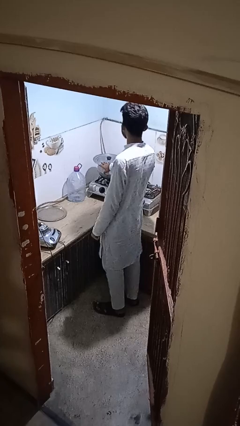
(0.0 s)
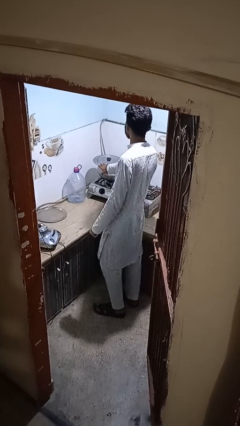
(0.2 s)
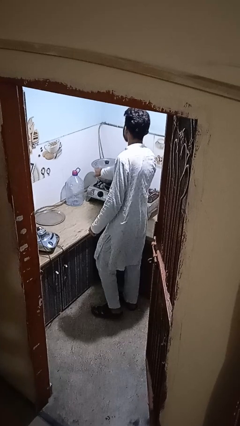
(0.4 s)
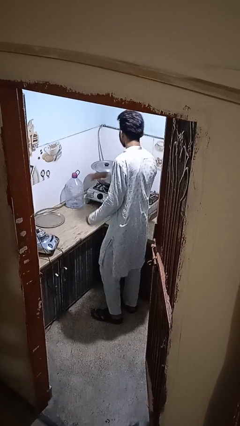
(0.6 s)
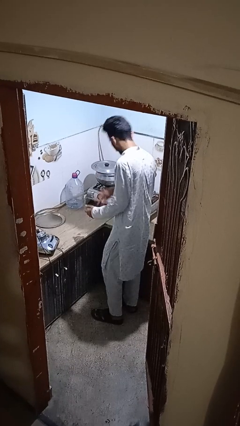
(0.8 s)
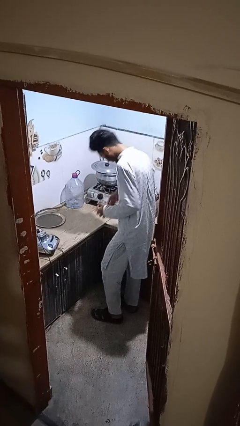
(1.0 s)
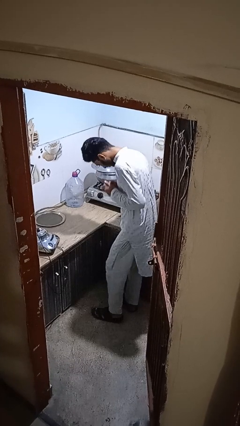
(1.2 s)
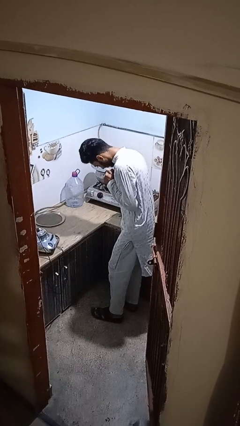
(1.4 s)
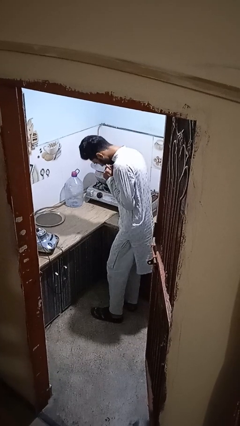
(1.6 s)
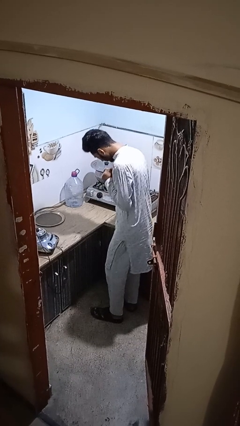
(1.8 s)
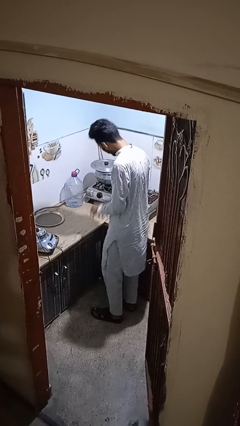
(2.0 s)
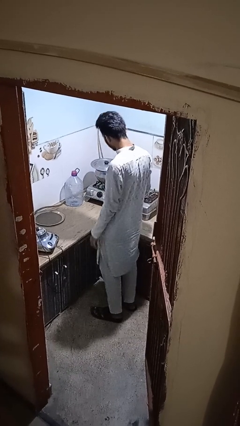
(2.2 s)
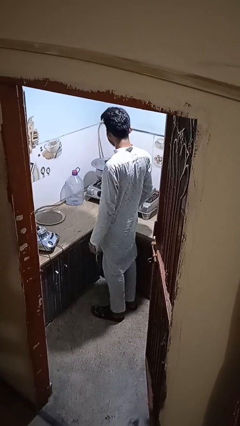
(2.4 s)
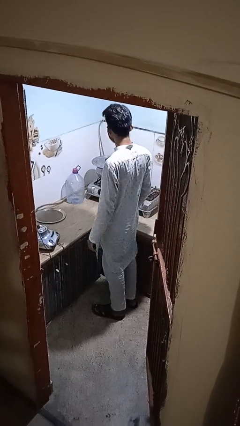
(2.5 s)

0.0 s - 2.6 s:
person burns hand

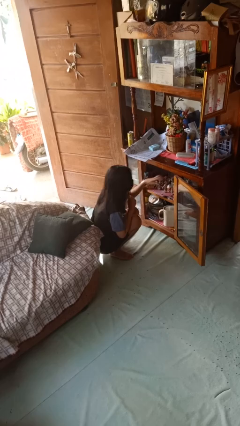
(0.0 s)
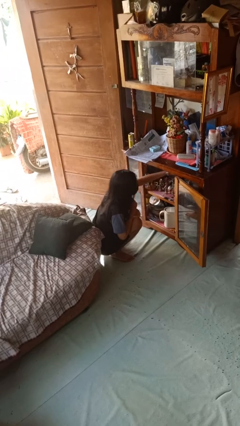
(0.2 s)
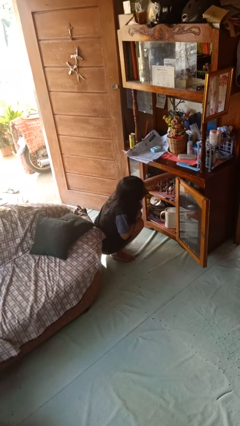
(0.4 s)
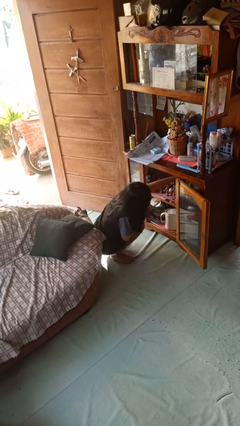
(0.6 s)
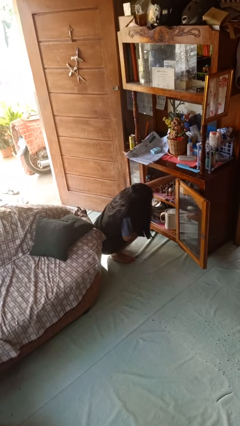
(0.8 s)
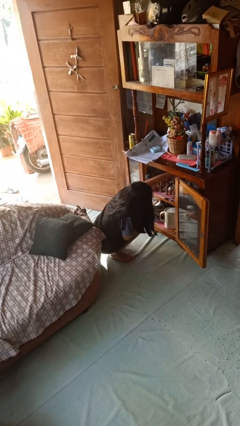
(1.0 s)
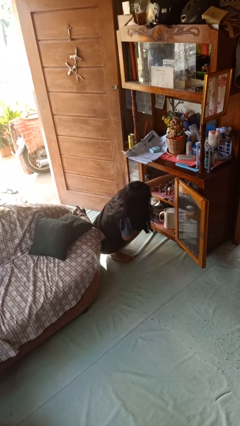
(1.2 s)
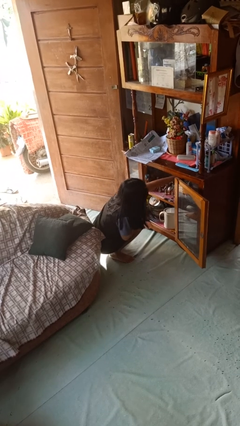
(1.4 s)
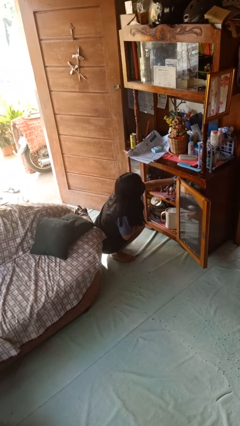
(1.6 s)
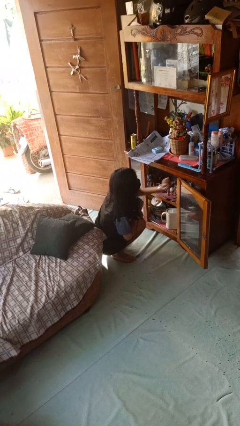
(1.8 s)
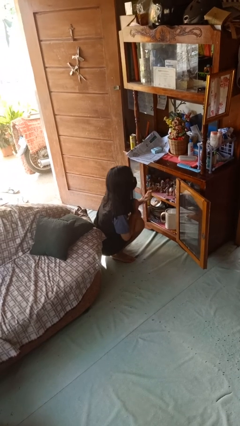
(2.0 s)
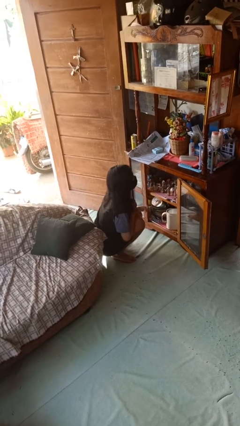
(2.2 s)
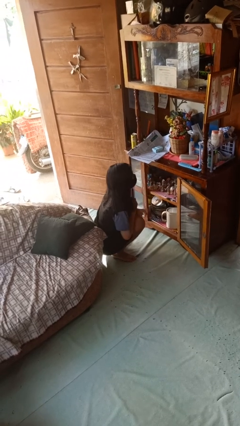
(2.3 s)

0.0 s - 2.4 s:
person searches in cabinet

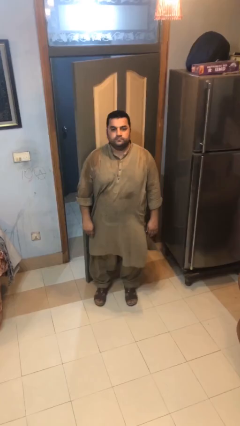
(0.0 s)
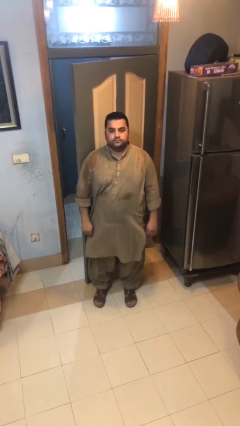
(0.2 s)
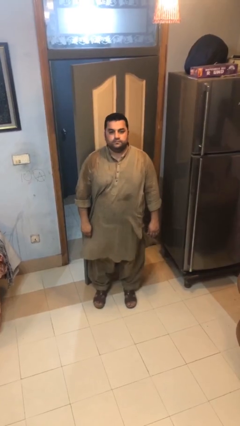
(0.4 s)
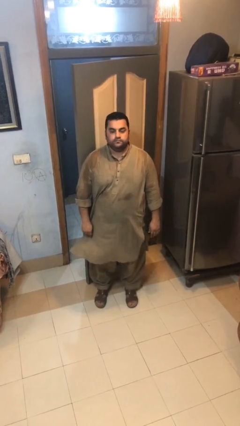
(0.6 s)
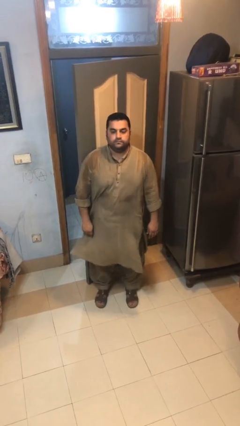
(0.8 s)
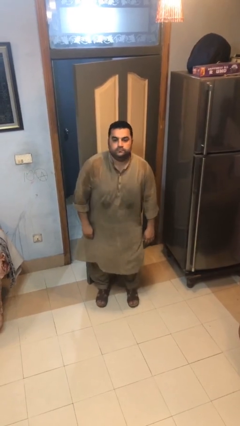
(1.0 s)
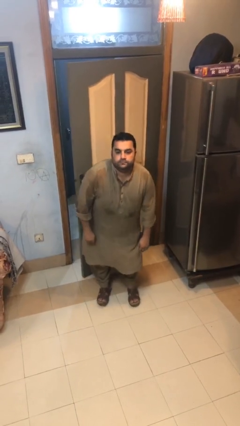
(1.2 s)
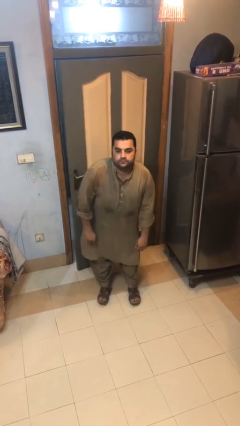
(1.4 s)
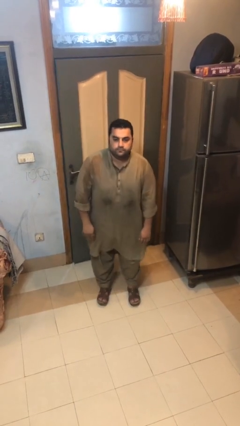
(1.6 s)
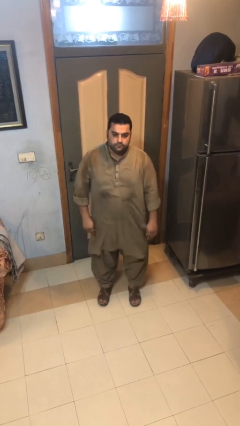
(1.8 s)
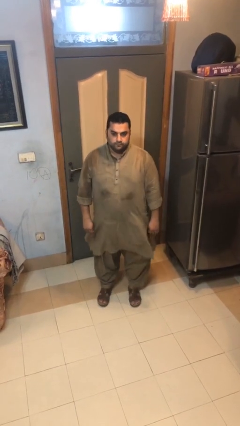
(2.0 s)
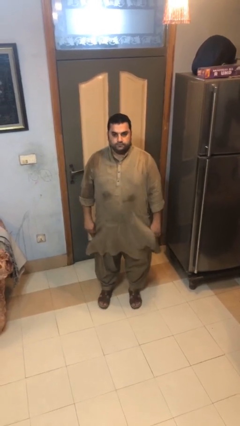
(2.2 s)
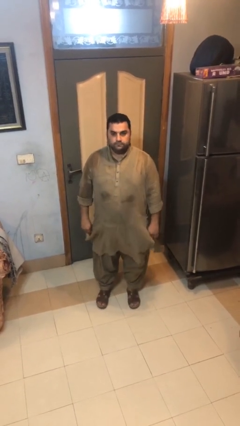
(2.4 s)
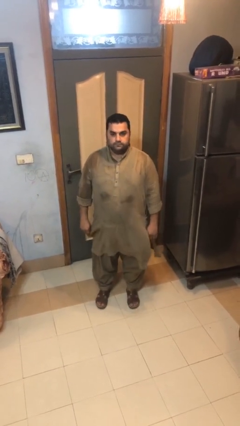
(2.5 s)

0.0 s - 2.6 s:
person closes door with hip

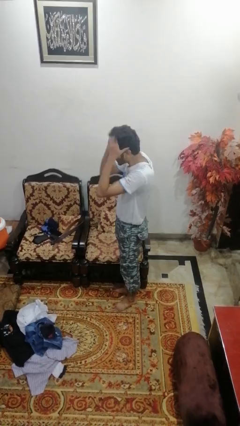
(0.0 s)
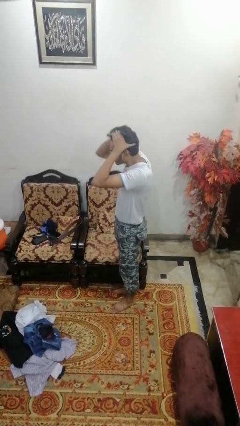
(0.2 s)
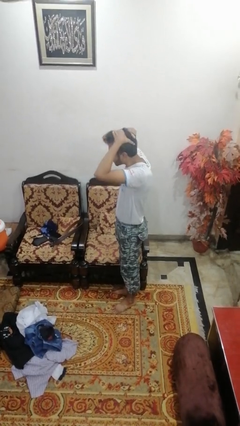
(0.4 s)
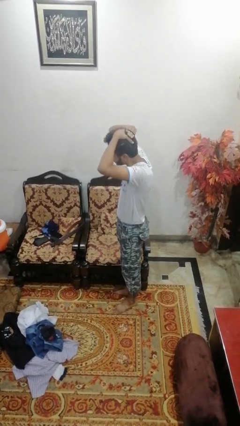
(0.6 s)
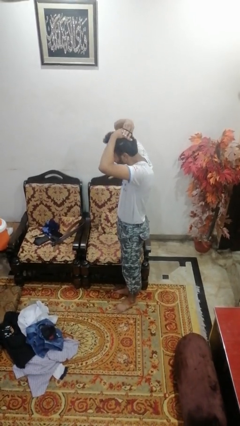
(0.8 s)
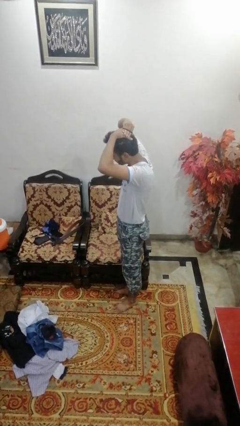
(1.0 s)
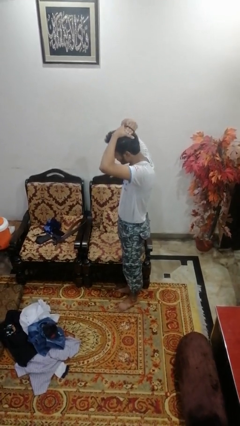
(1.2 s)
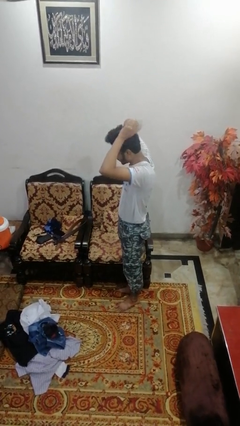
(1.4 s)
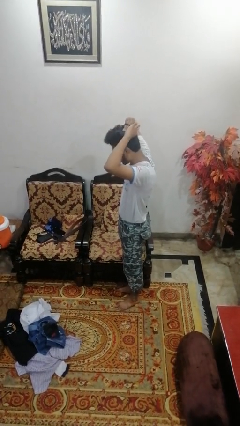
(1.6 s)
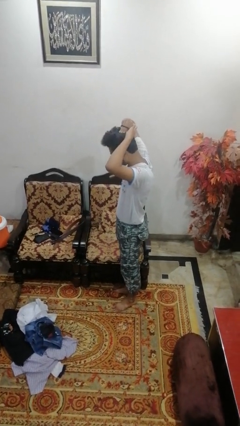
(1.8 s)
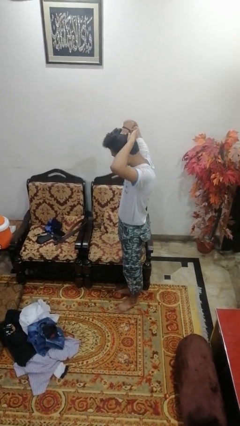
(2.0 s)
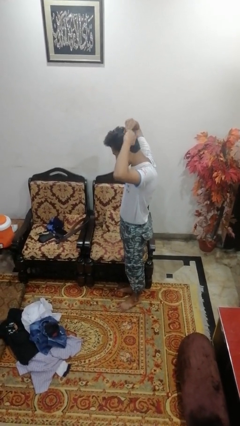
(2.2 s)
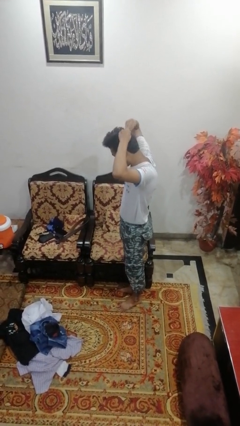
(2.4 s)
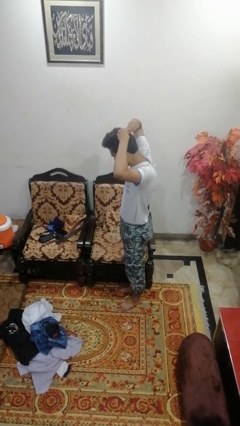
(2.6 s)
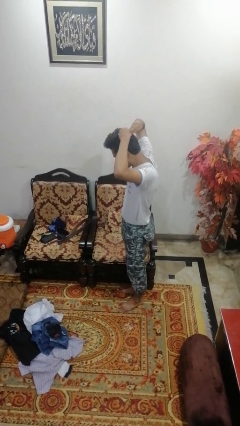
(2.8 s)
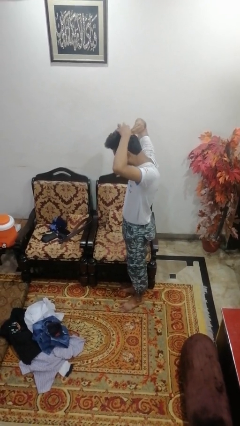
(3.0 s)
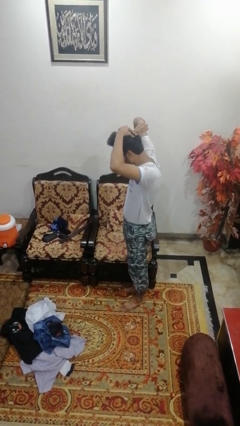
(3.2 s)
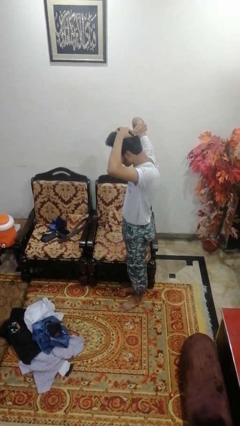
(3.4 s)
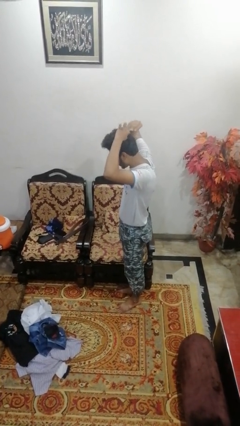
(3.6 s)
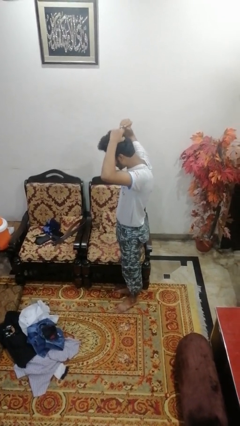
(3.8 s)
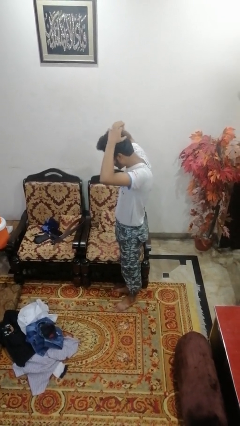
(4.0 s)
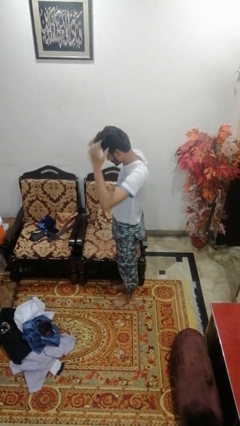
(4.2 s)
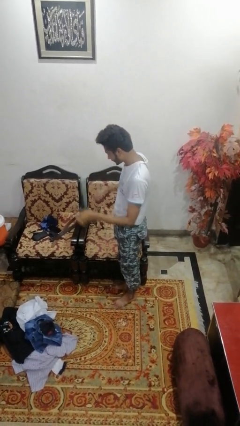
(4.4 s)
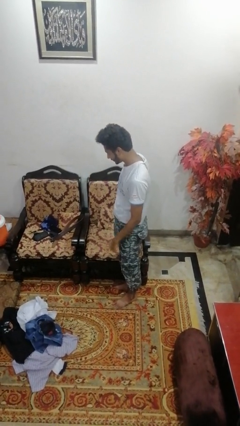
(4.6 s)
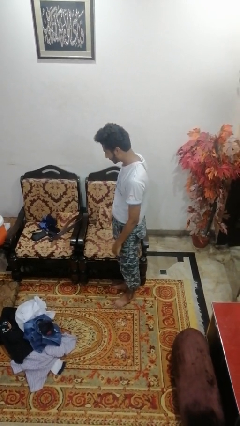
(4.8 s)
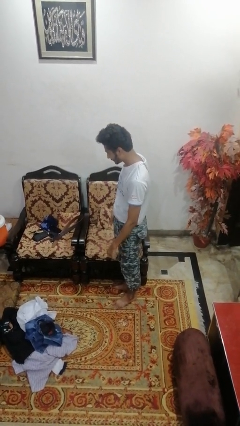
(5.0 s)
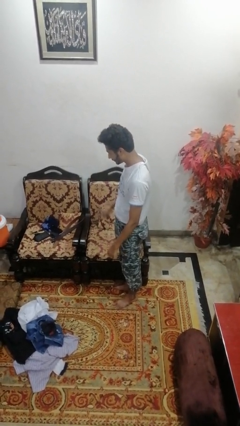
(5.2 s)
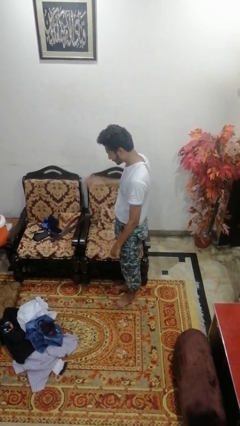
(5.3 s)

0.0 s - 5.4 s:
person puts hair in ponytail

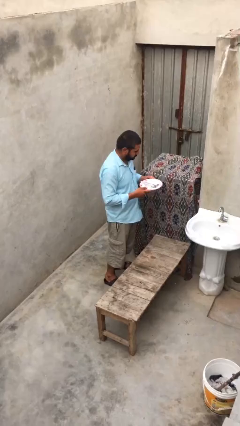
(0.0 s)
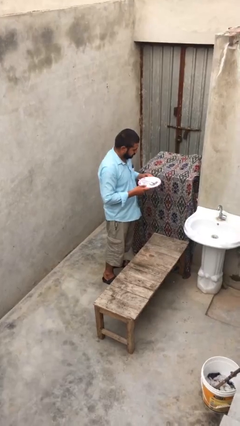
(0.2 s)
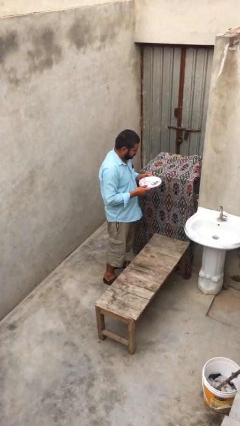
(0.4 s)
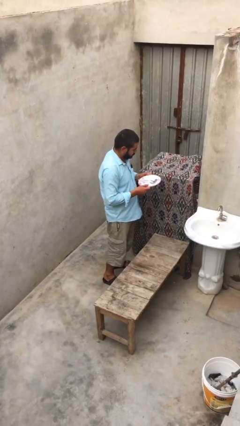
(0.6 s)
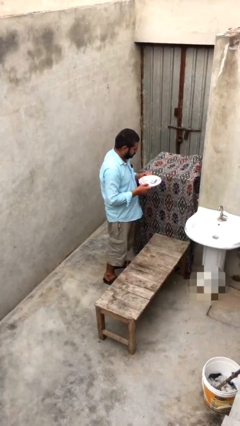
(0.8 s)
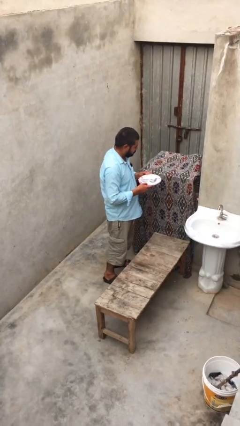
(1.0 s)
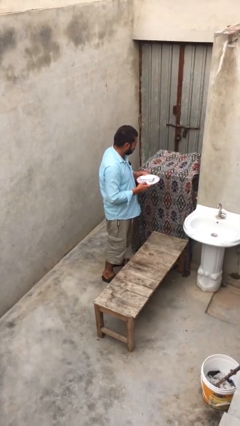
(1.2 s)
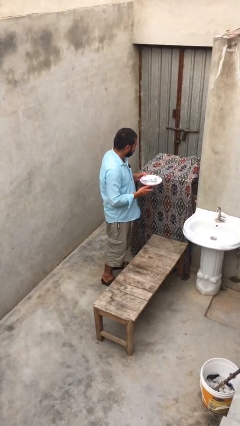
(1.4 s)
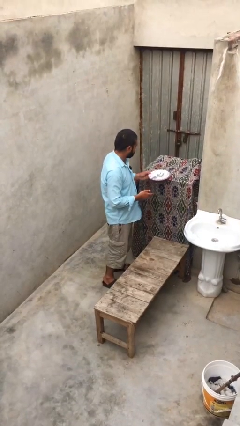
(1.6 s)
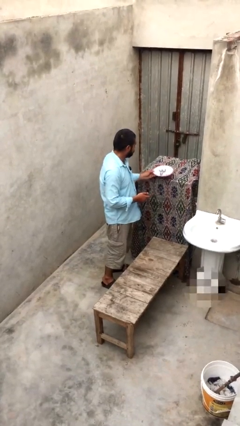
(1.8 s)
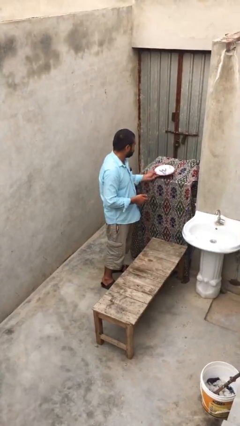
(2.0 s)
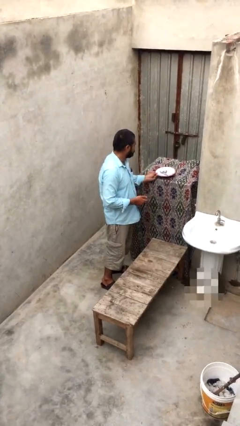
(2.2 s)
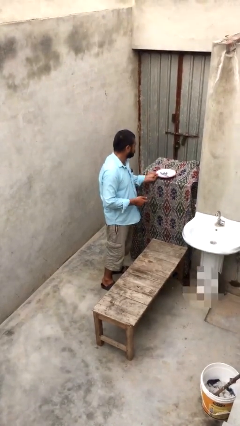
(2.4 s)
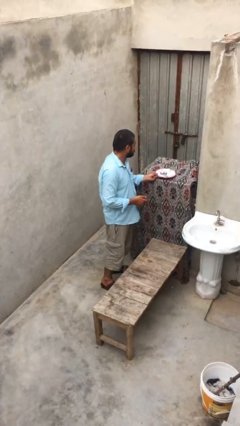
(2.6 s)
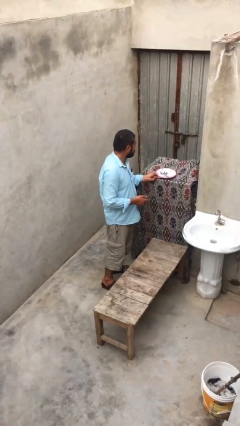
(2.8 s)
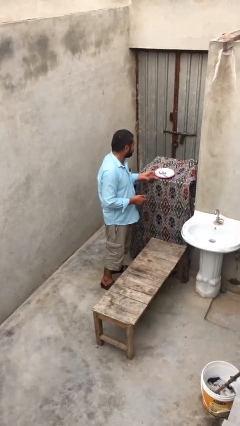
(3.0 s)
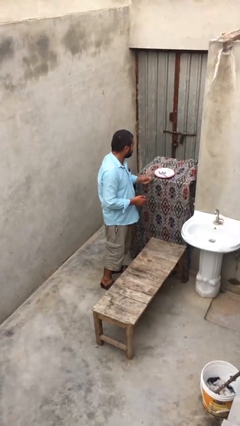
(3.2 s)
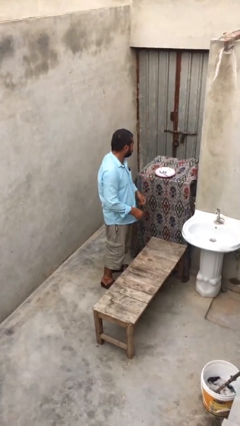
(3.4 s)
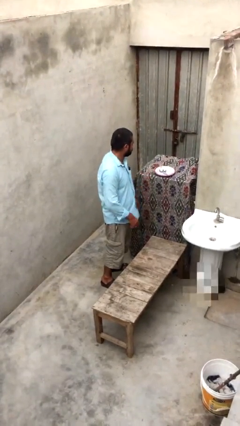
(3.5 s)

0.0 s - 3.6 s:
person puts down object on shelf

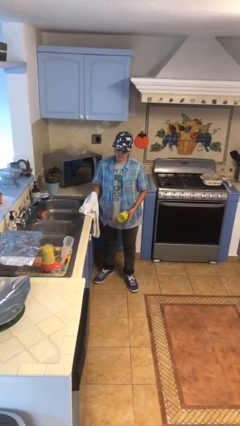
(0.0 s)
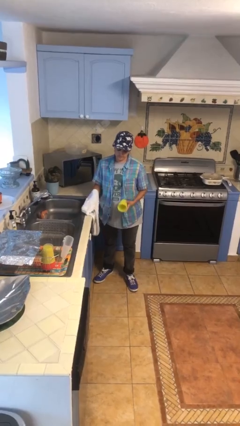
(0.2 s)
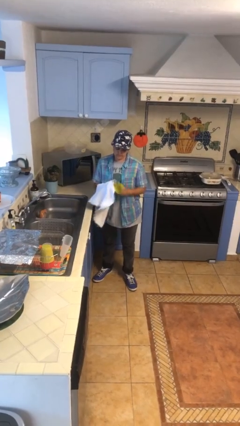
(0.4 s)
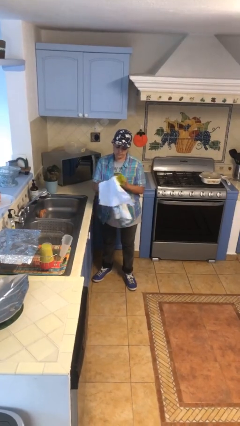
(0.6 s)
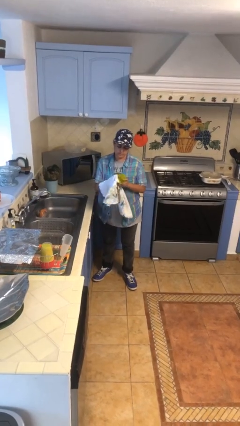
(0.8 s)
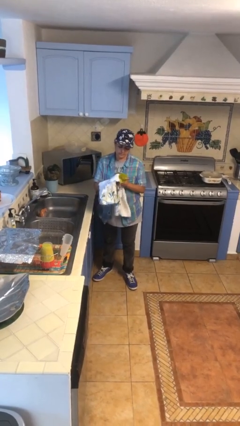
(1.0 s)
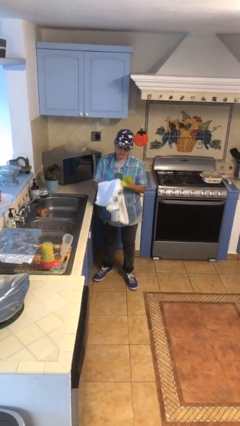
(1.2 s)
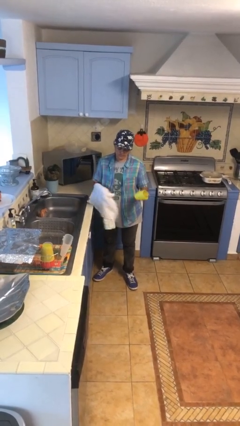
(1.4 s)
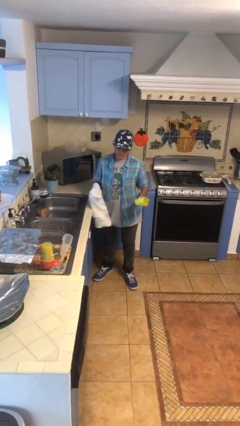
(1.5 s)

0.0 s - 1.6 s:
person dries dish
